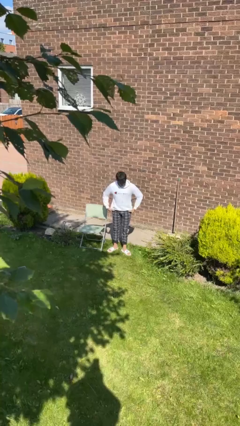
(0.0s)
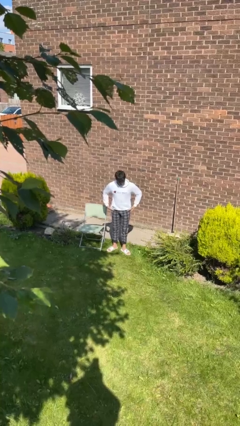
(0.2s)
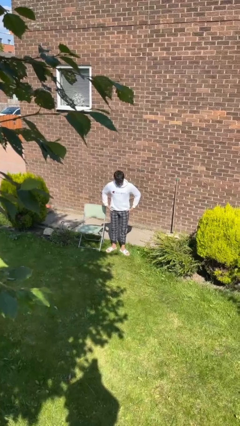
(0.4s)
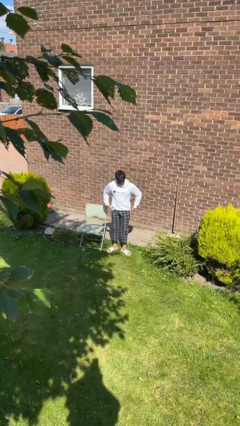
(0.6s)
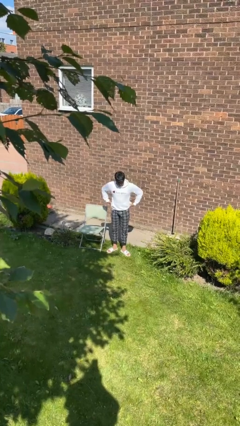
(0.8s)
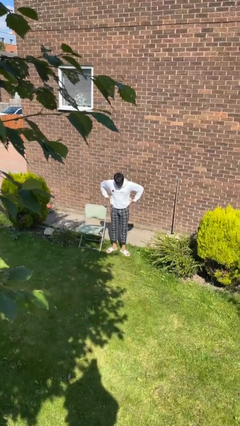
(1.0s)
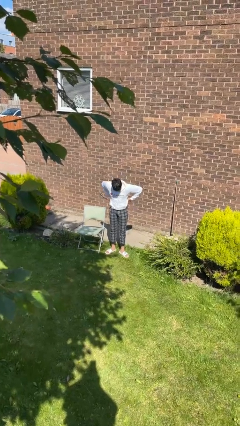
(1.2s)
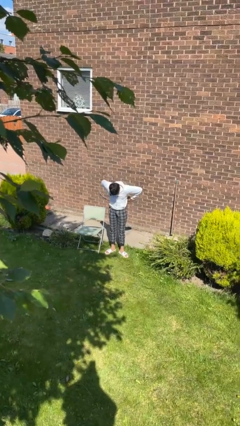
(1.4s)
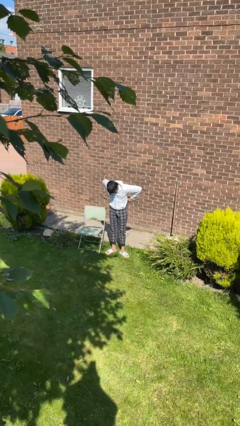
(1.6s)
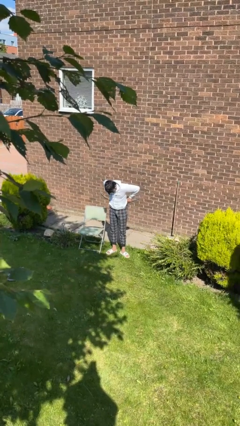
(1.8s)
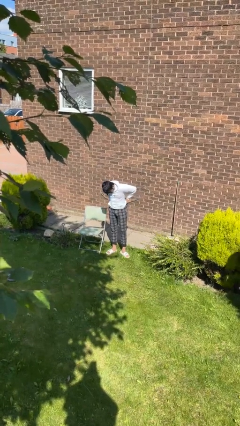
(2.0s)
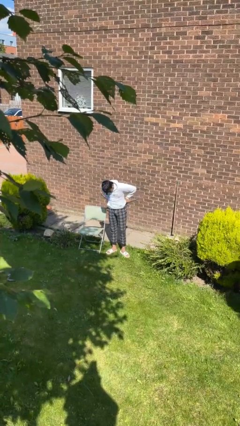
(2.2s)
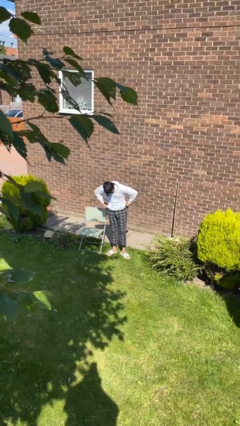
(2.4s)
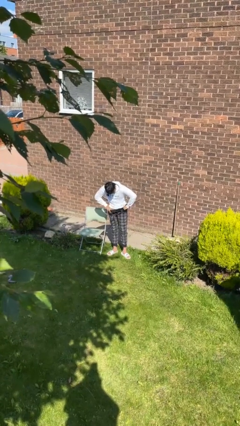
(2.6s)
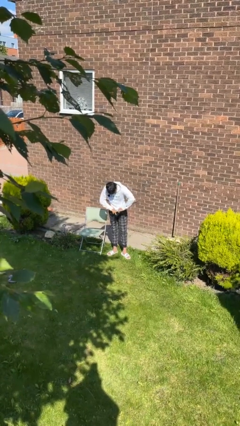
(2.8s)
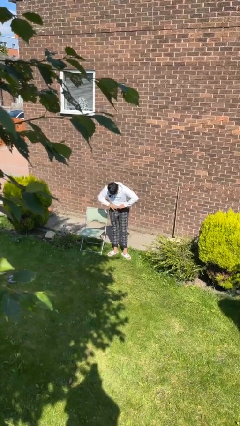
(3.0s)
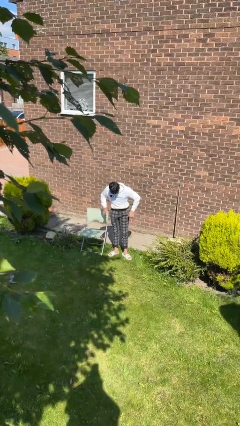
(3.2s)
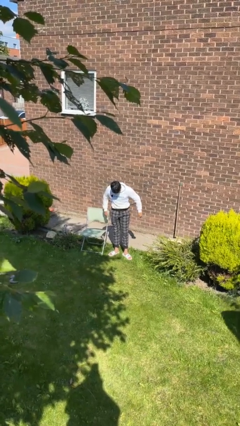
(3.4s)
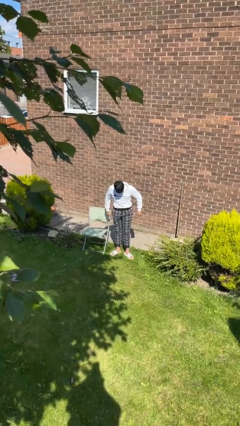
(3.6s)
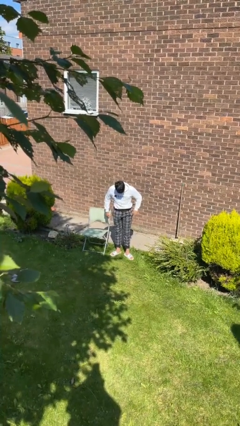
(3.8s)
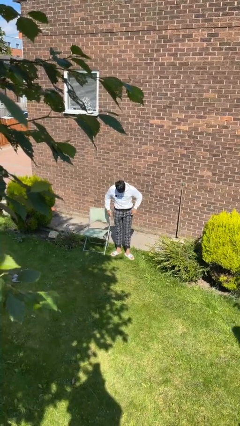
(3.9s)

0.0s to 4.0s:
person tucks in shirt

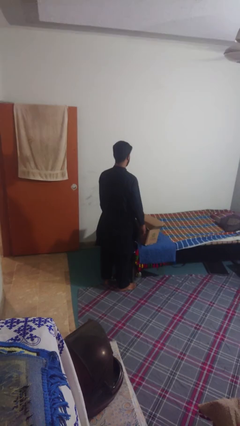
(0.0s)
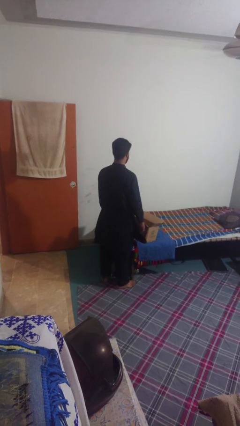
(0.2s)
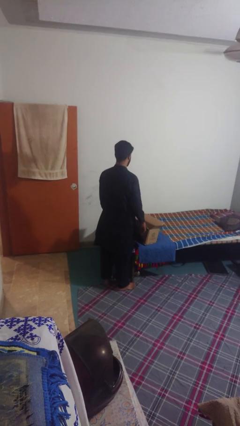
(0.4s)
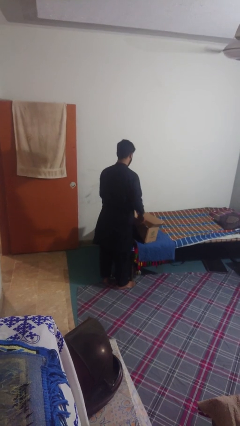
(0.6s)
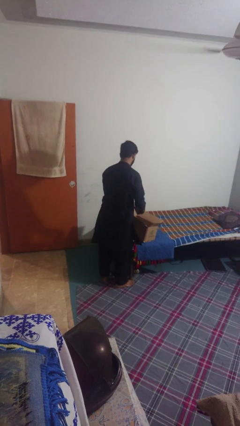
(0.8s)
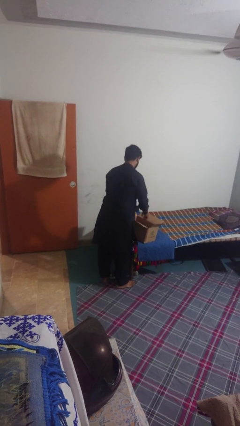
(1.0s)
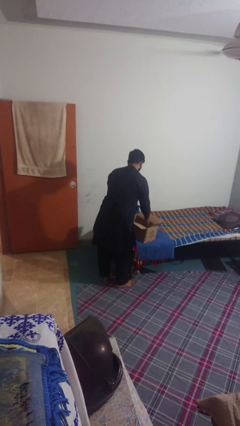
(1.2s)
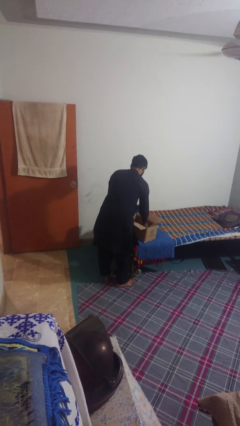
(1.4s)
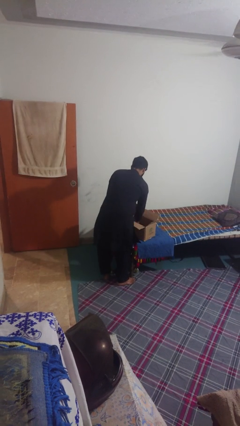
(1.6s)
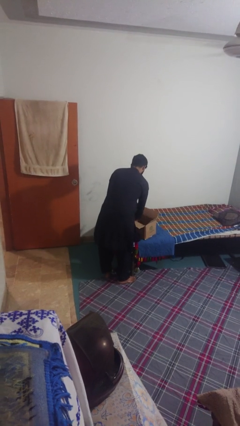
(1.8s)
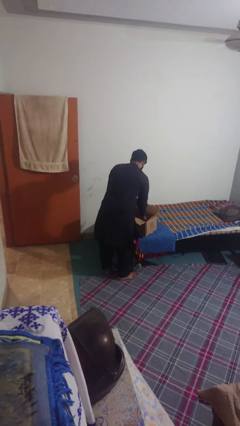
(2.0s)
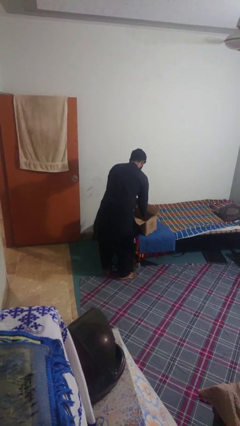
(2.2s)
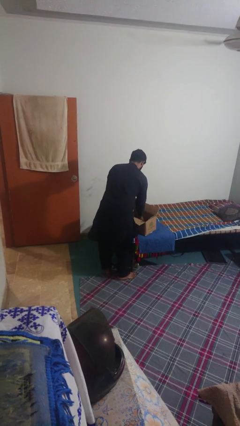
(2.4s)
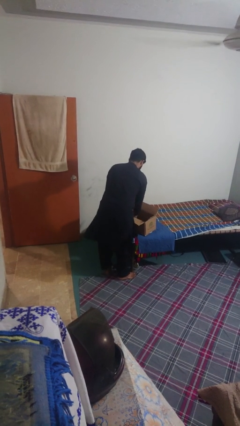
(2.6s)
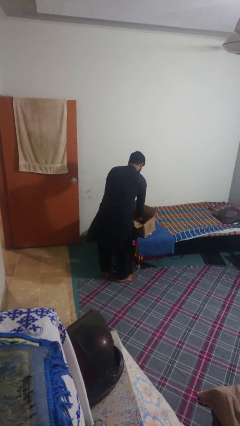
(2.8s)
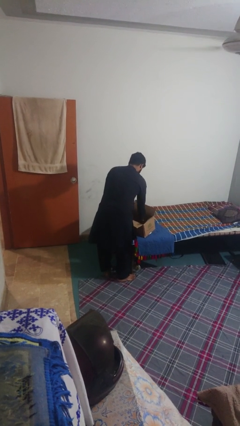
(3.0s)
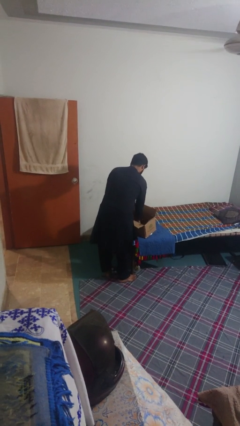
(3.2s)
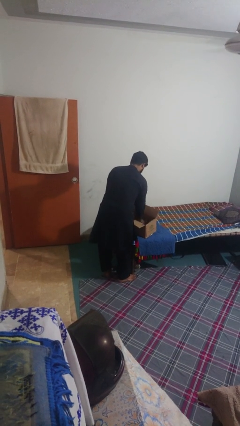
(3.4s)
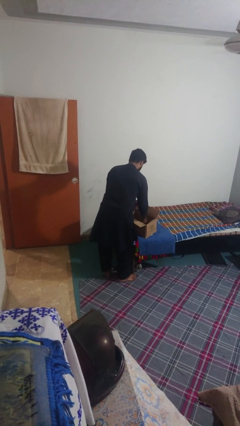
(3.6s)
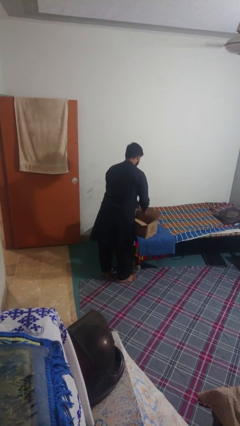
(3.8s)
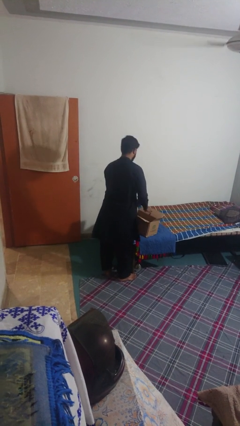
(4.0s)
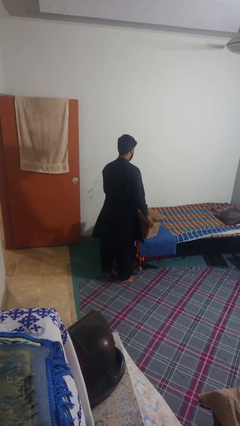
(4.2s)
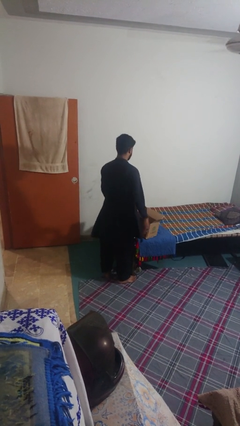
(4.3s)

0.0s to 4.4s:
person searches in box

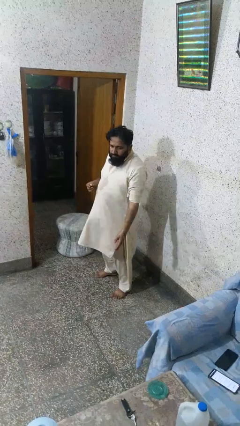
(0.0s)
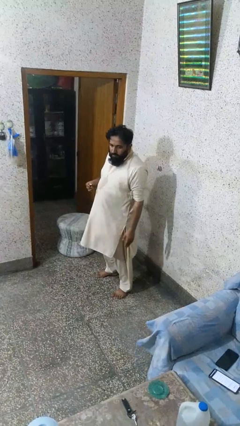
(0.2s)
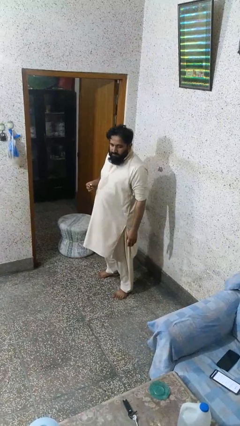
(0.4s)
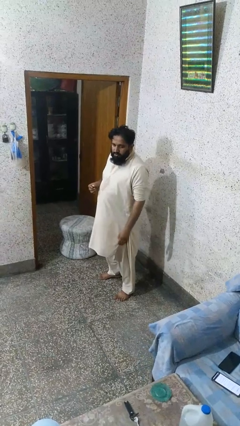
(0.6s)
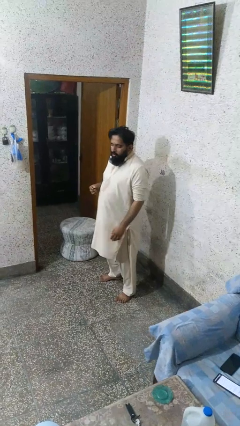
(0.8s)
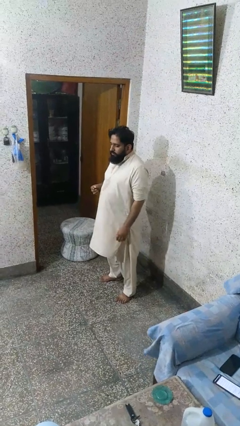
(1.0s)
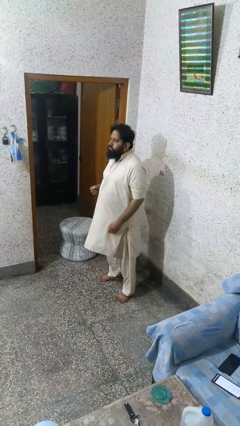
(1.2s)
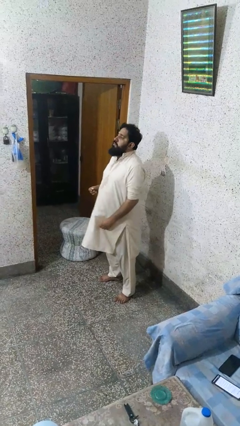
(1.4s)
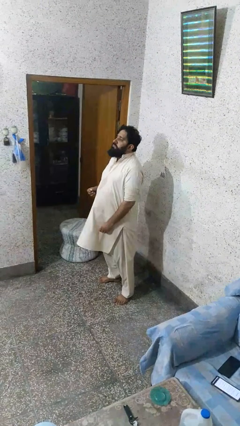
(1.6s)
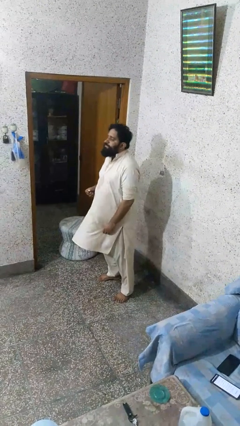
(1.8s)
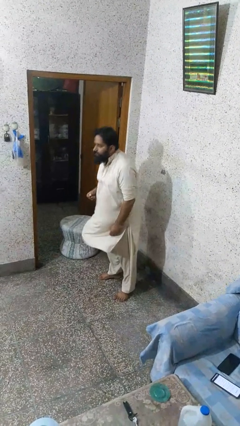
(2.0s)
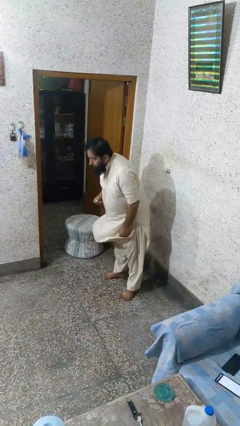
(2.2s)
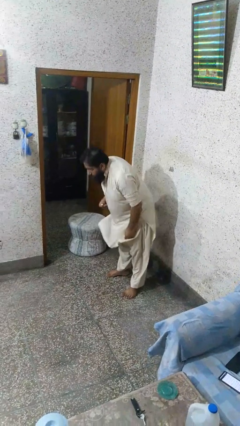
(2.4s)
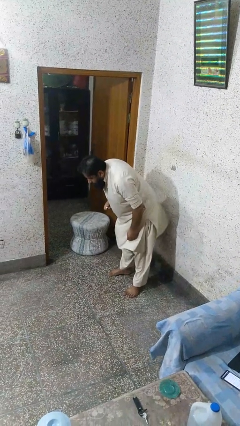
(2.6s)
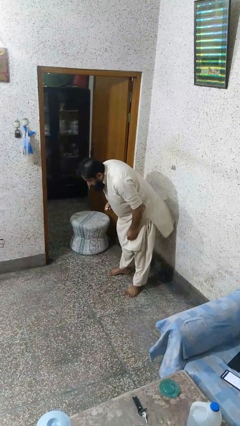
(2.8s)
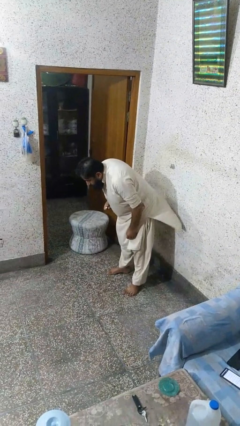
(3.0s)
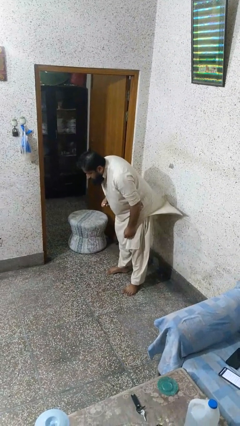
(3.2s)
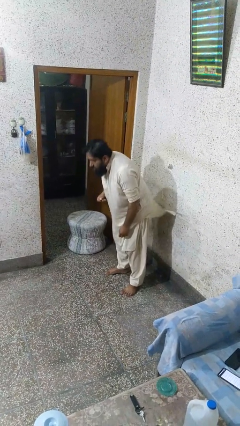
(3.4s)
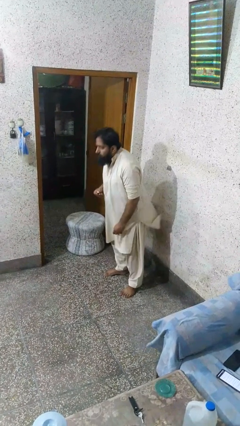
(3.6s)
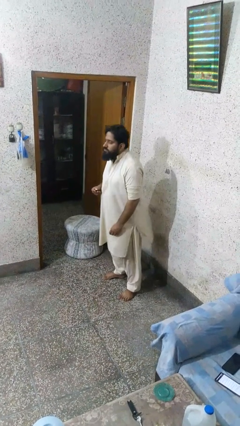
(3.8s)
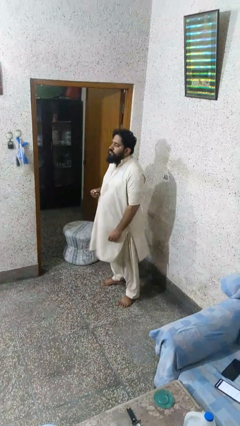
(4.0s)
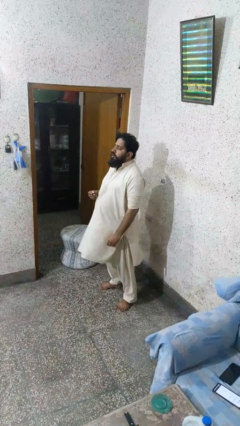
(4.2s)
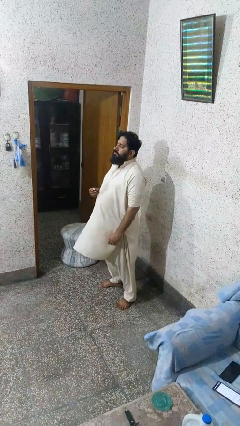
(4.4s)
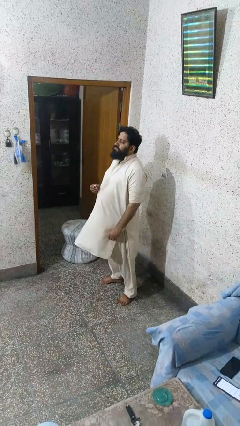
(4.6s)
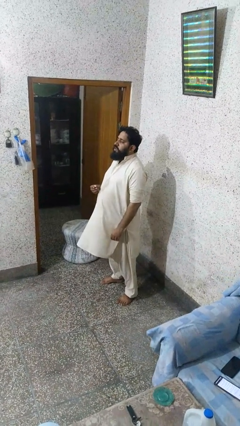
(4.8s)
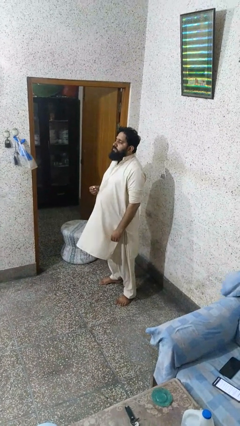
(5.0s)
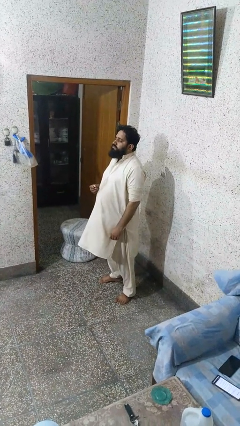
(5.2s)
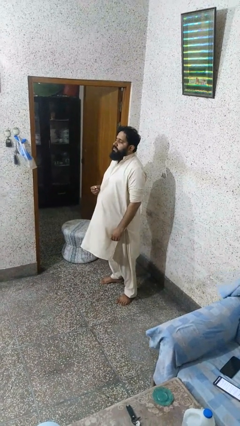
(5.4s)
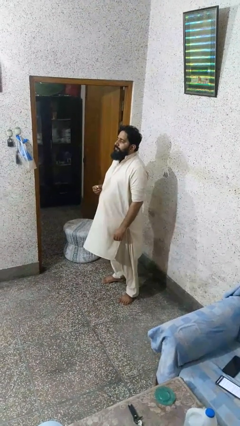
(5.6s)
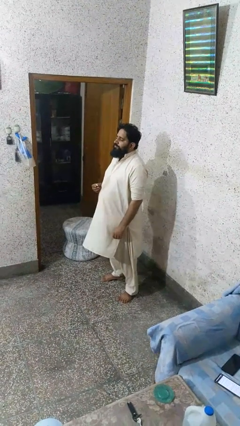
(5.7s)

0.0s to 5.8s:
person bows

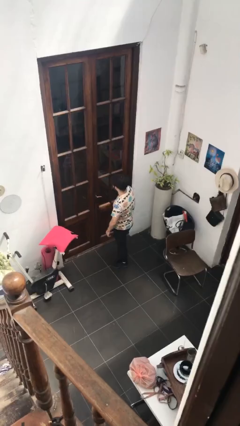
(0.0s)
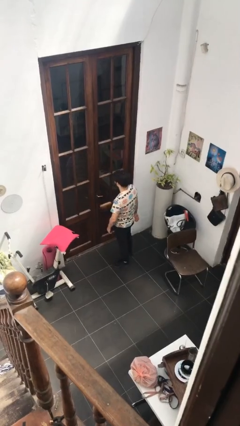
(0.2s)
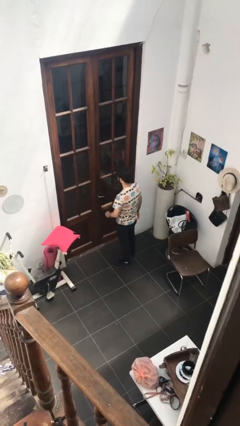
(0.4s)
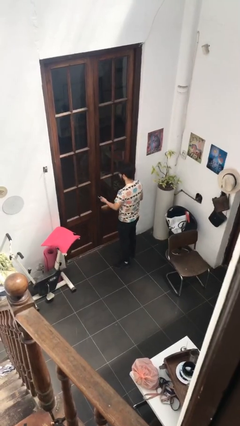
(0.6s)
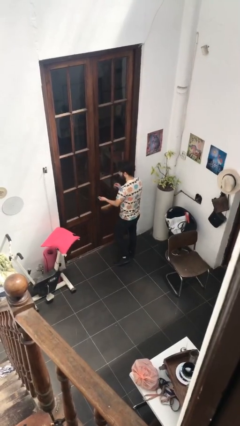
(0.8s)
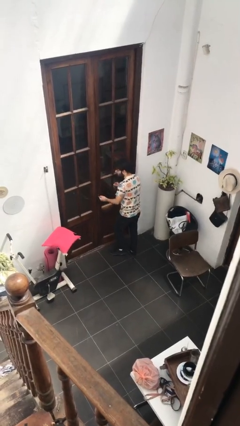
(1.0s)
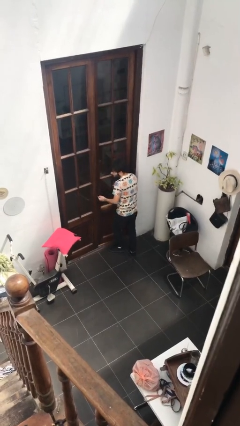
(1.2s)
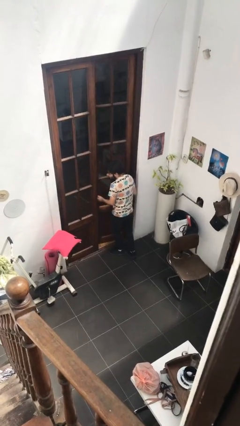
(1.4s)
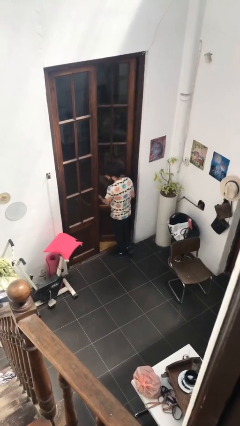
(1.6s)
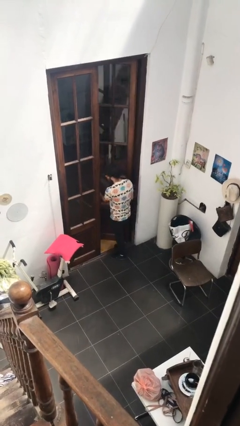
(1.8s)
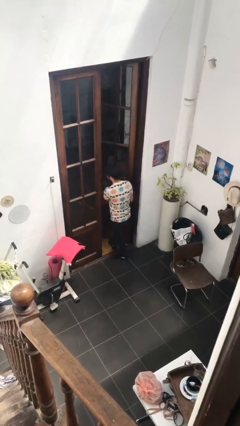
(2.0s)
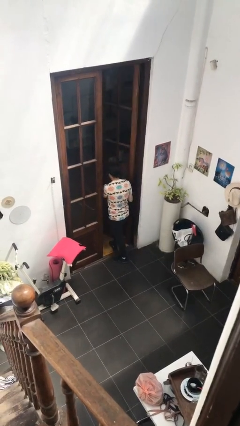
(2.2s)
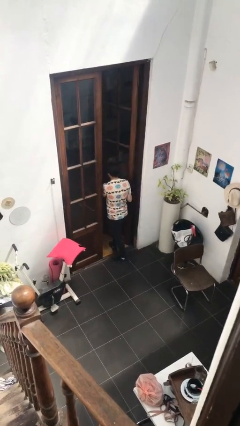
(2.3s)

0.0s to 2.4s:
person opens facility door

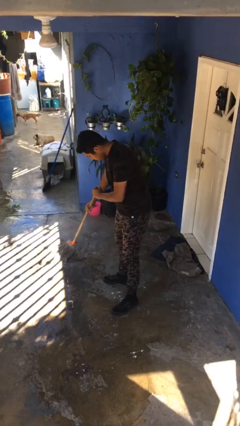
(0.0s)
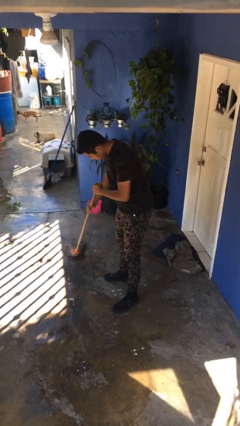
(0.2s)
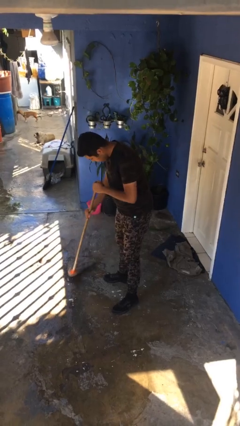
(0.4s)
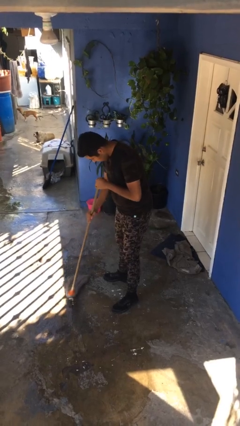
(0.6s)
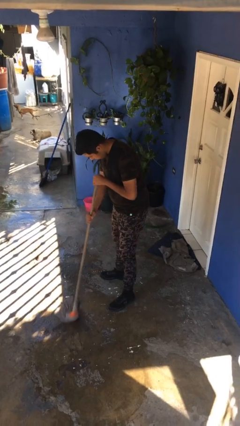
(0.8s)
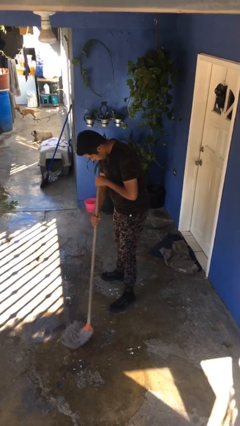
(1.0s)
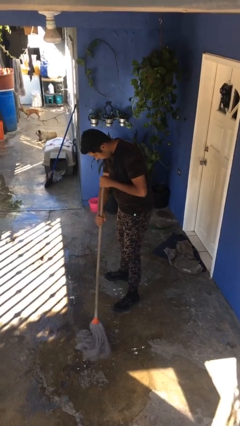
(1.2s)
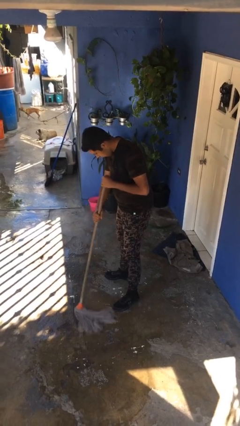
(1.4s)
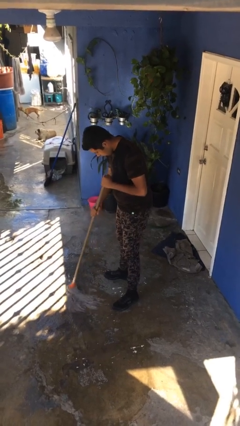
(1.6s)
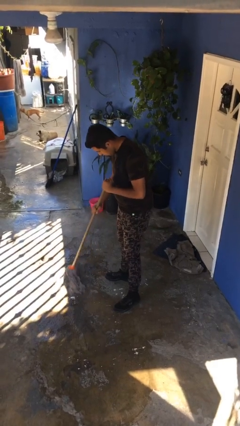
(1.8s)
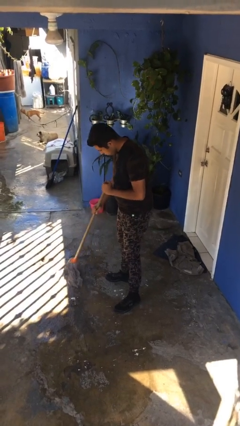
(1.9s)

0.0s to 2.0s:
person mops
